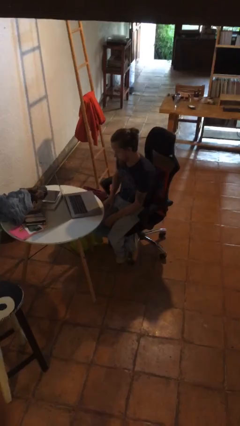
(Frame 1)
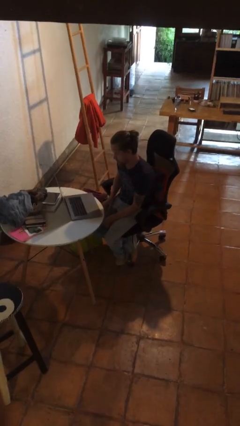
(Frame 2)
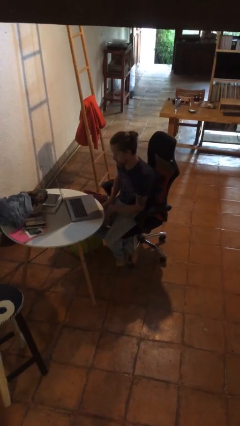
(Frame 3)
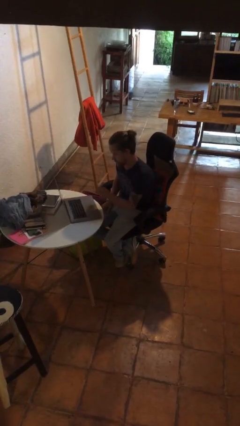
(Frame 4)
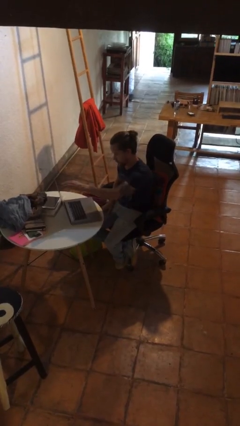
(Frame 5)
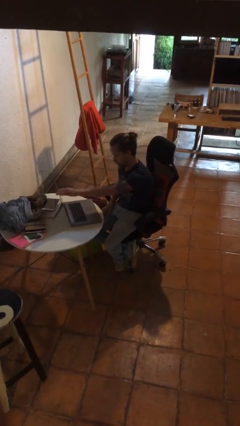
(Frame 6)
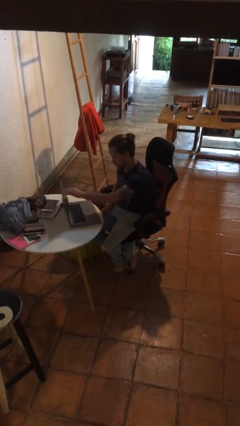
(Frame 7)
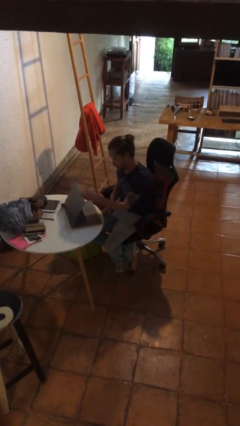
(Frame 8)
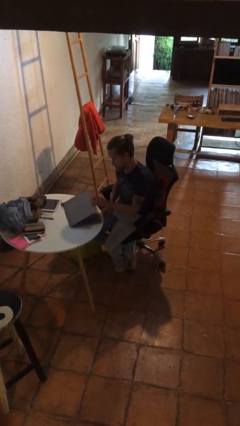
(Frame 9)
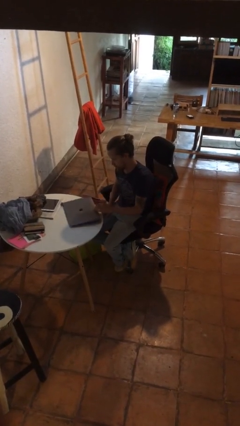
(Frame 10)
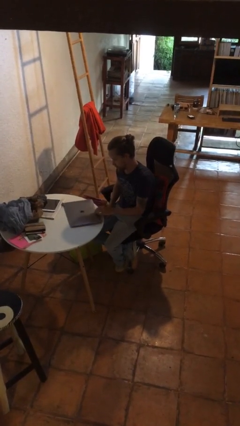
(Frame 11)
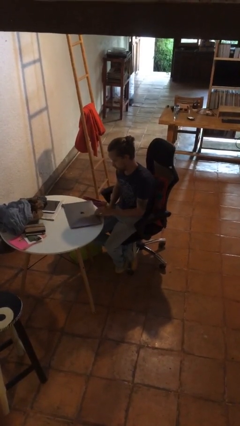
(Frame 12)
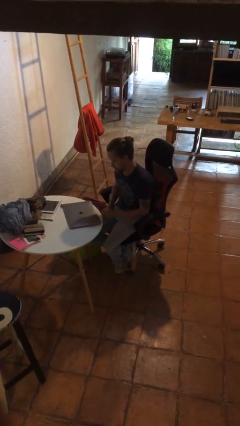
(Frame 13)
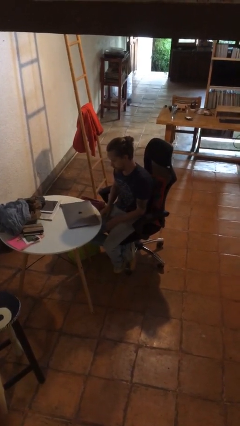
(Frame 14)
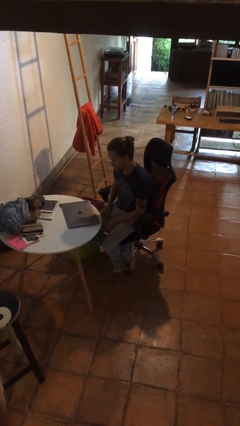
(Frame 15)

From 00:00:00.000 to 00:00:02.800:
person closes laptop

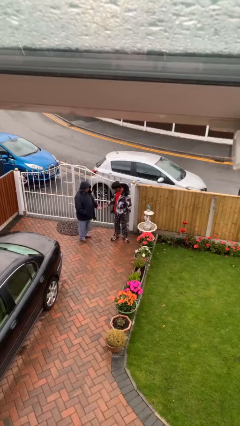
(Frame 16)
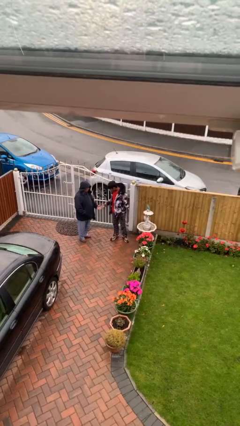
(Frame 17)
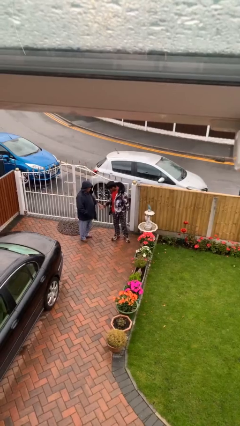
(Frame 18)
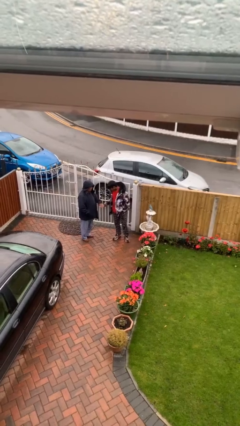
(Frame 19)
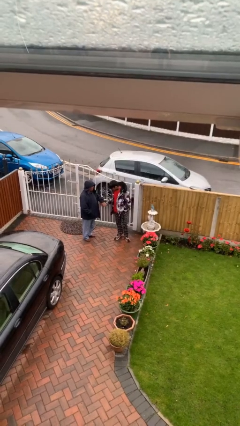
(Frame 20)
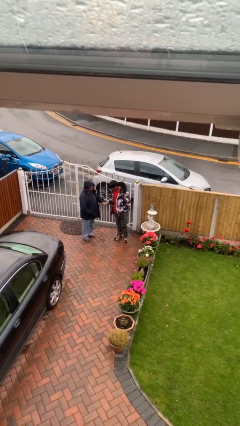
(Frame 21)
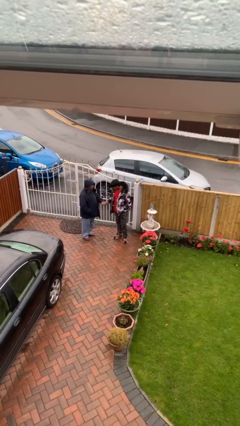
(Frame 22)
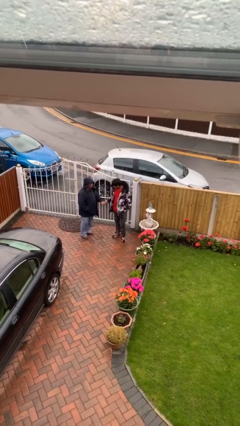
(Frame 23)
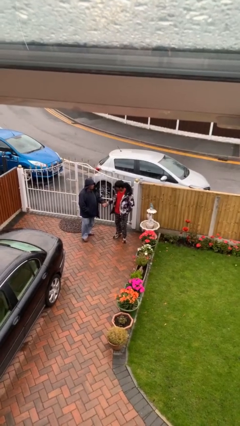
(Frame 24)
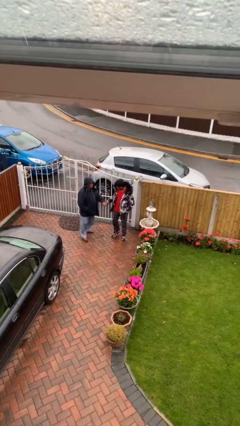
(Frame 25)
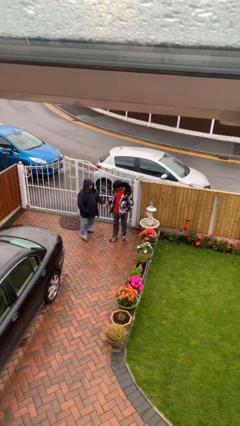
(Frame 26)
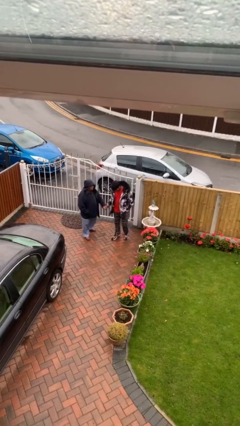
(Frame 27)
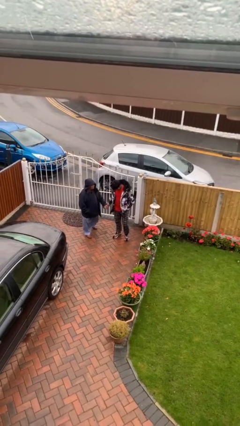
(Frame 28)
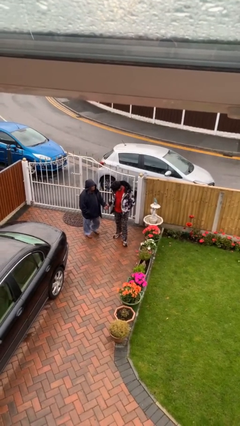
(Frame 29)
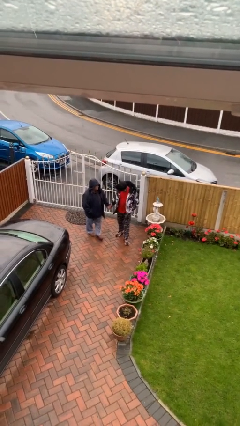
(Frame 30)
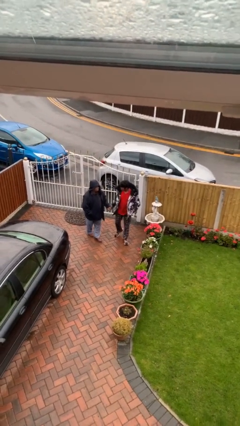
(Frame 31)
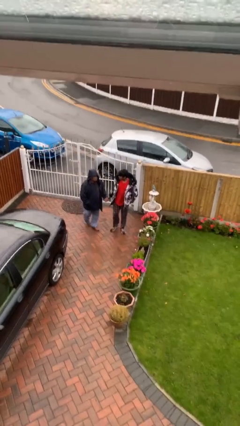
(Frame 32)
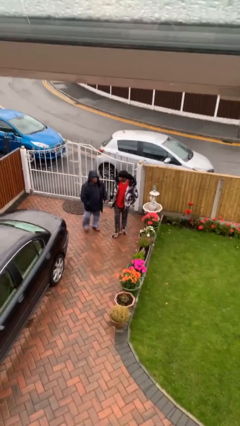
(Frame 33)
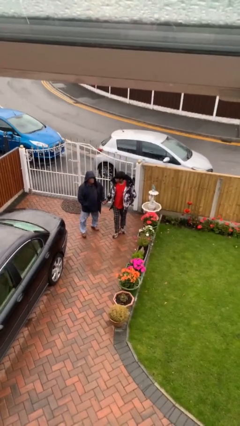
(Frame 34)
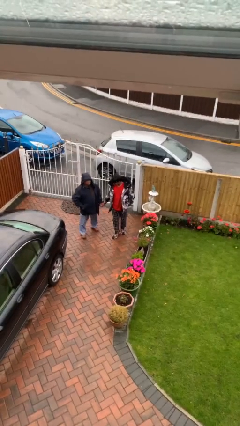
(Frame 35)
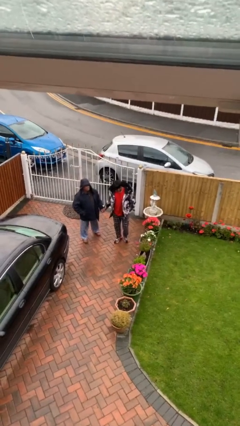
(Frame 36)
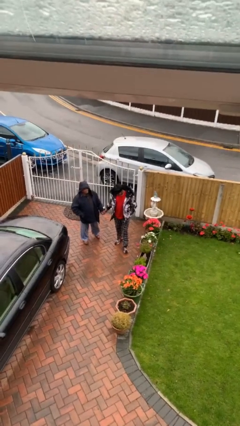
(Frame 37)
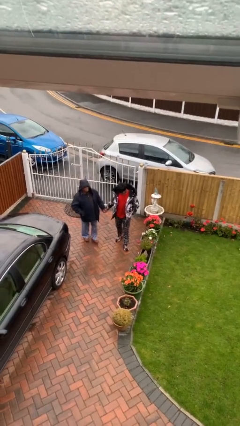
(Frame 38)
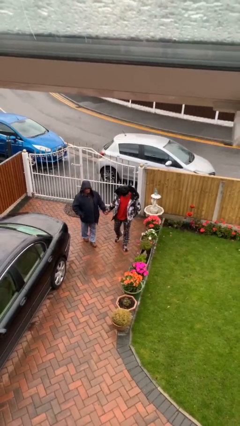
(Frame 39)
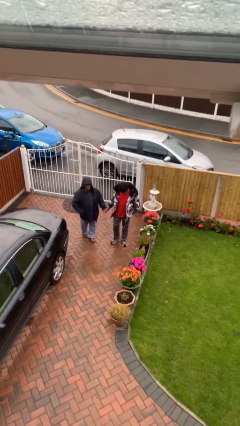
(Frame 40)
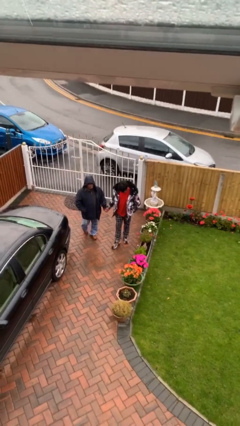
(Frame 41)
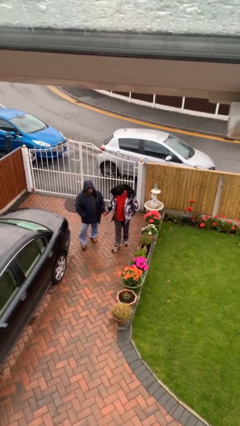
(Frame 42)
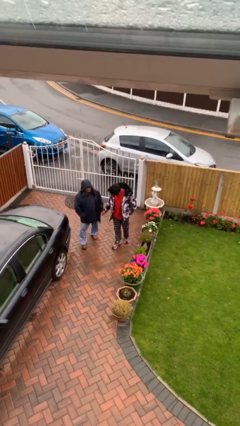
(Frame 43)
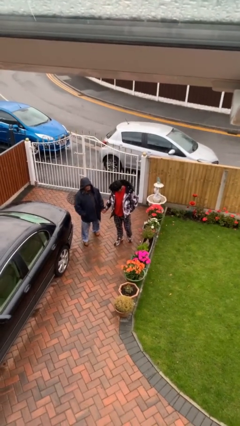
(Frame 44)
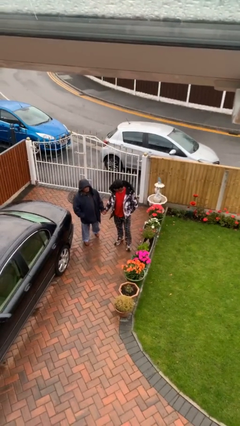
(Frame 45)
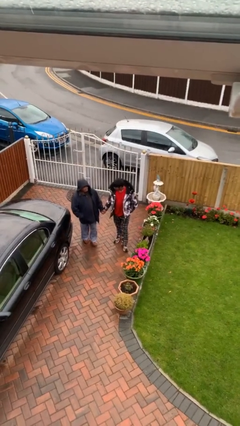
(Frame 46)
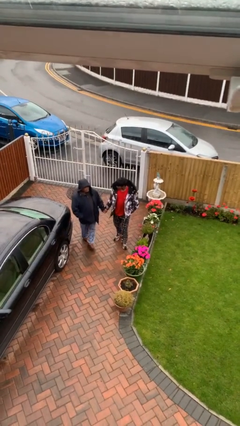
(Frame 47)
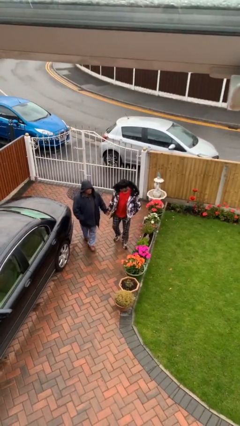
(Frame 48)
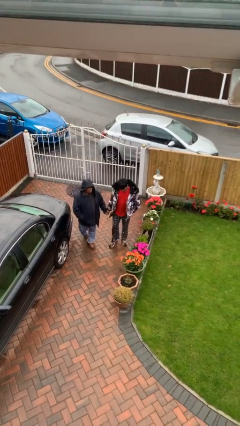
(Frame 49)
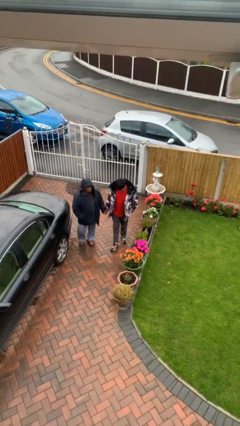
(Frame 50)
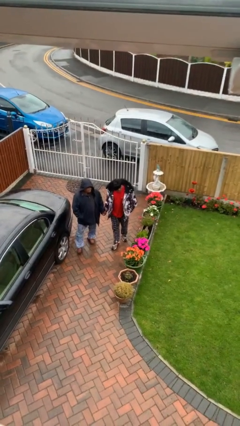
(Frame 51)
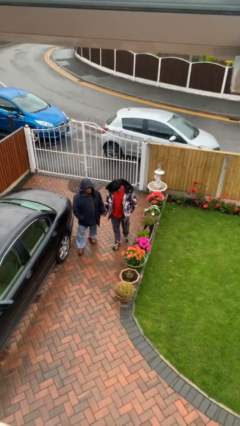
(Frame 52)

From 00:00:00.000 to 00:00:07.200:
person holds hand

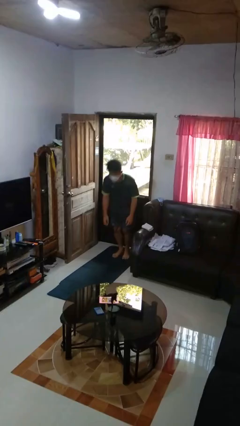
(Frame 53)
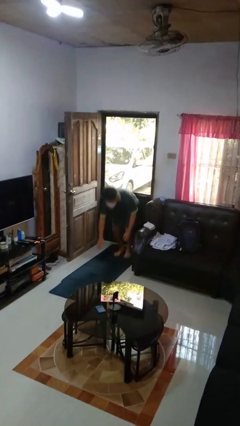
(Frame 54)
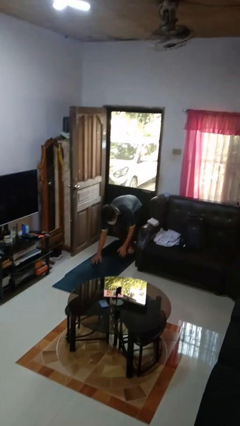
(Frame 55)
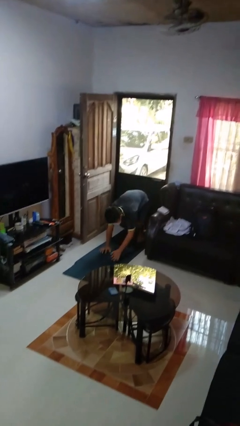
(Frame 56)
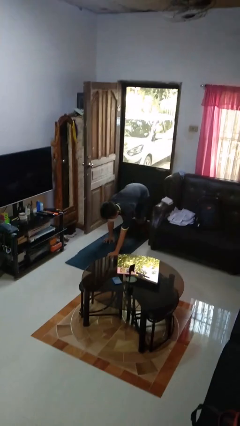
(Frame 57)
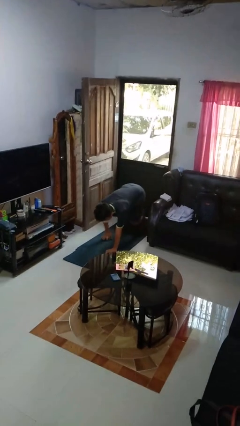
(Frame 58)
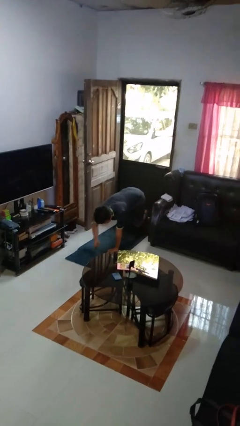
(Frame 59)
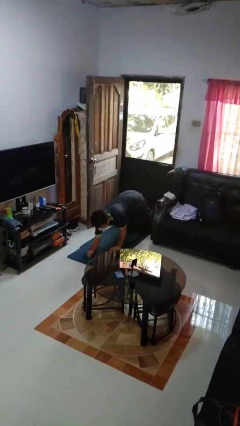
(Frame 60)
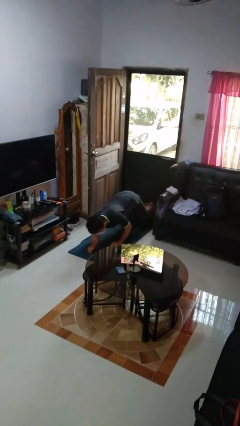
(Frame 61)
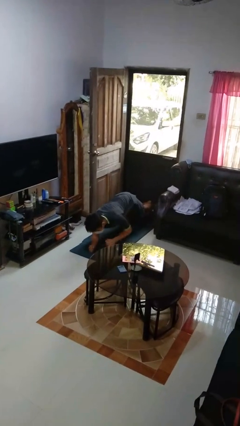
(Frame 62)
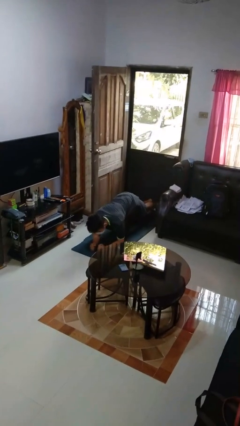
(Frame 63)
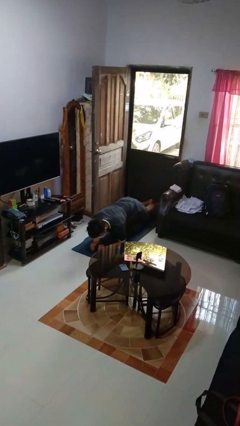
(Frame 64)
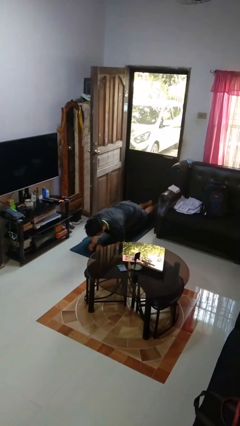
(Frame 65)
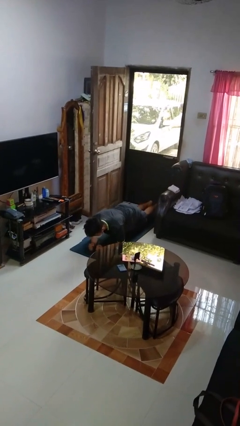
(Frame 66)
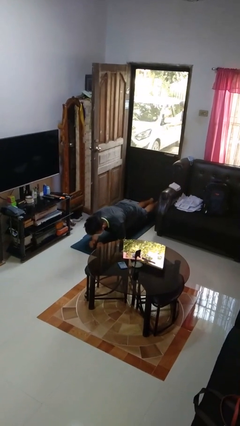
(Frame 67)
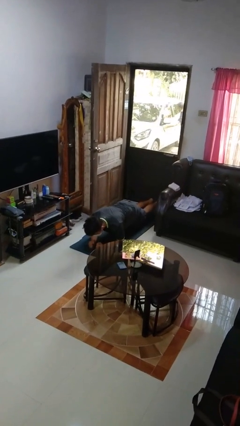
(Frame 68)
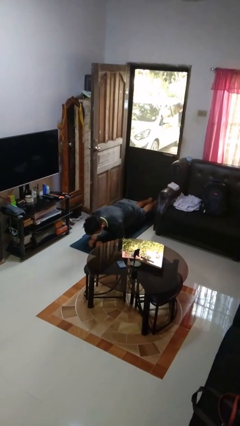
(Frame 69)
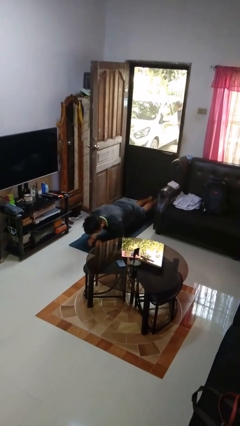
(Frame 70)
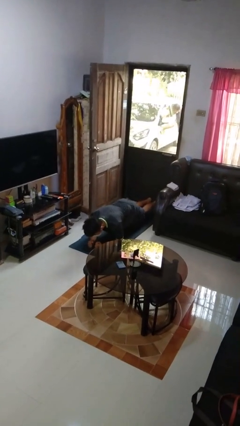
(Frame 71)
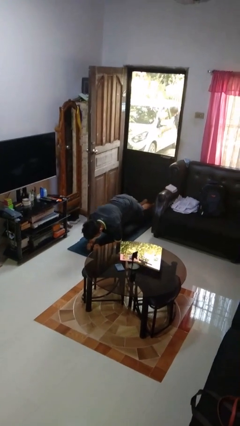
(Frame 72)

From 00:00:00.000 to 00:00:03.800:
person exercises with plank

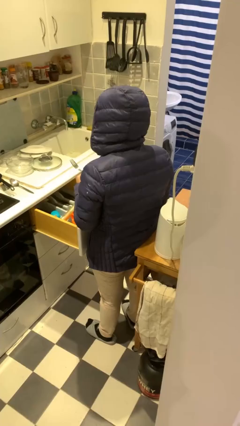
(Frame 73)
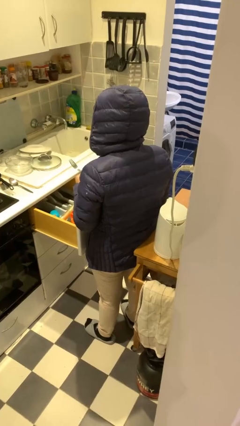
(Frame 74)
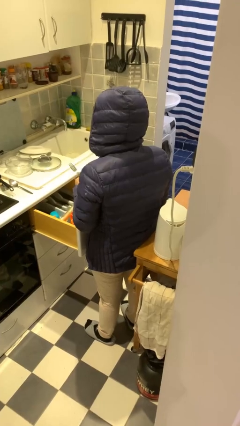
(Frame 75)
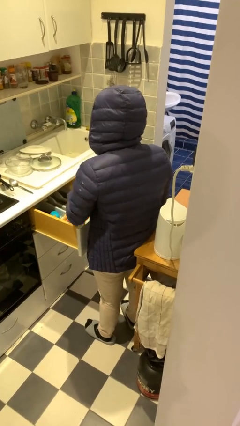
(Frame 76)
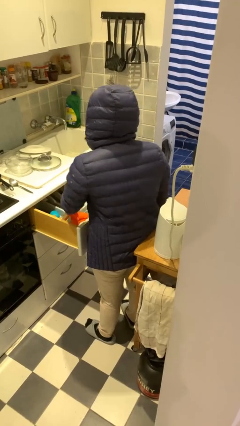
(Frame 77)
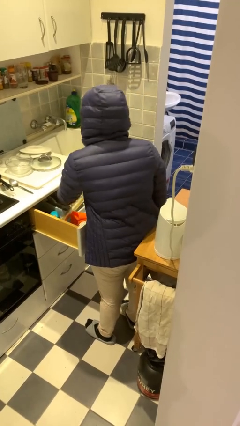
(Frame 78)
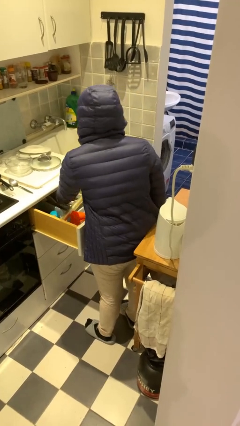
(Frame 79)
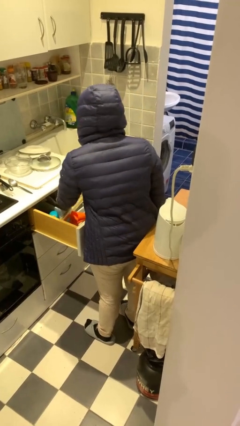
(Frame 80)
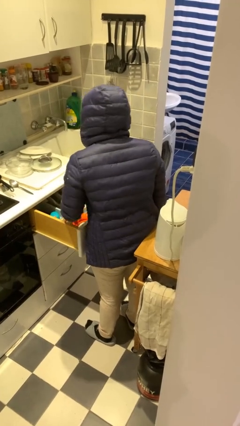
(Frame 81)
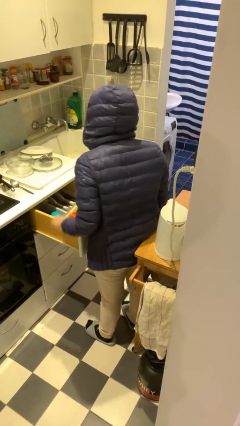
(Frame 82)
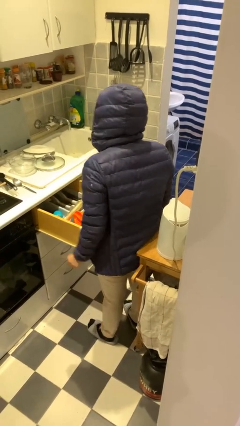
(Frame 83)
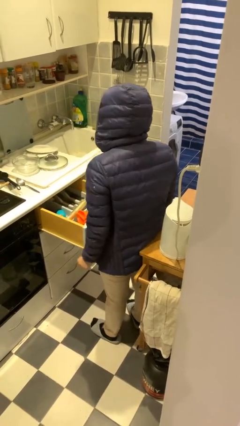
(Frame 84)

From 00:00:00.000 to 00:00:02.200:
person puts object into kitchen drawer

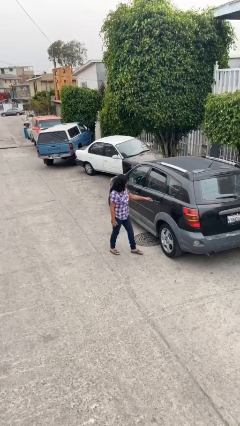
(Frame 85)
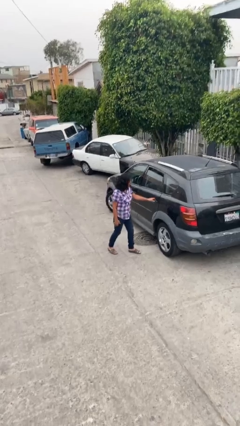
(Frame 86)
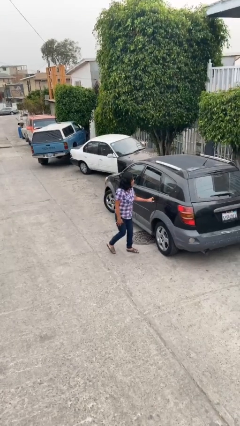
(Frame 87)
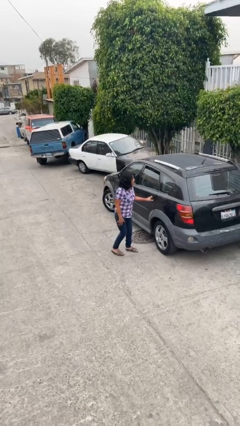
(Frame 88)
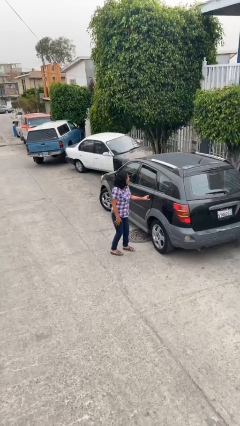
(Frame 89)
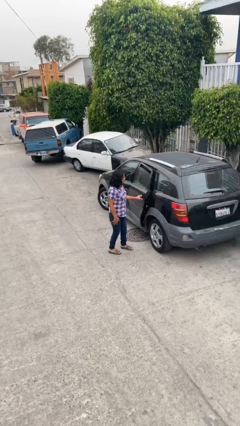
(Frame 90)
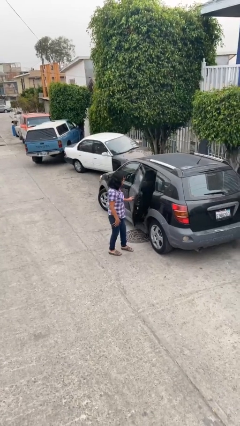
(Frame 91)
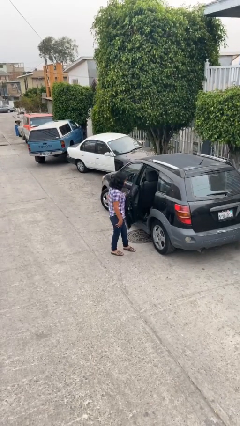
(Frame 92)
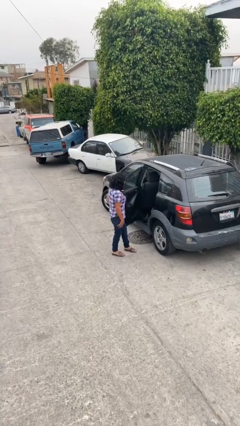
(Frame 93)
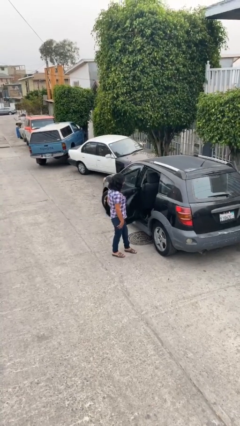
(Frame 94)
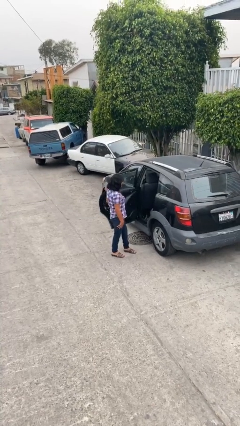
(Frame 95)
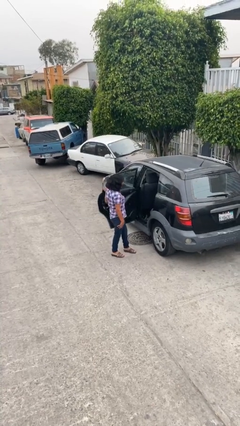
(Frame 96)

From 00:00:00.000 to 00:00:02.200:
person opens car door
